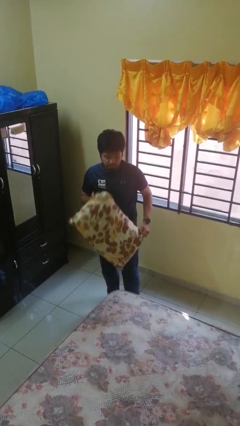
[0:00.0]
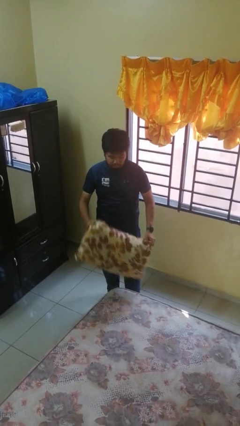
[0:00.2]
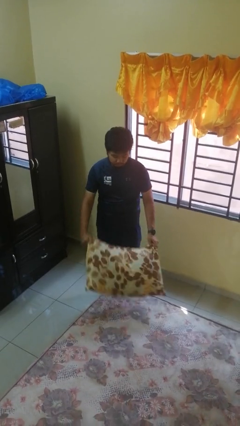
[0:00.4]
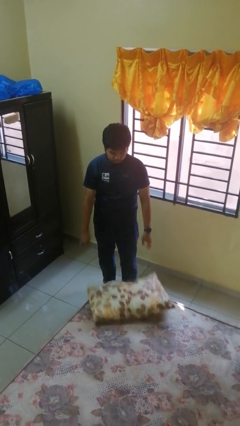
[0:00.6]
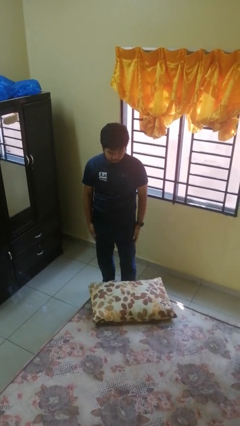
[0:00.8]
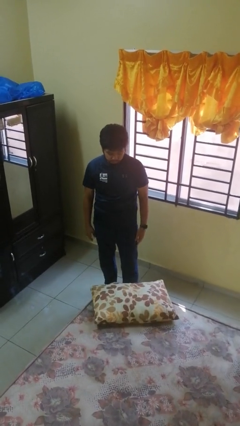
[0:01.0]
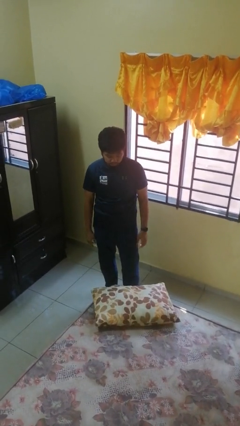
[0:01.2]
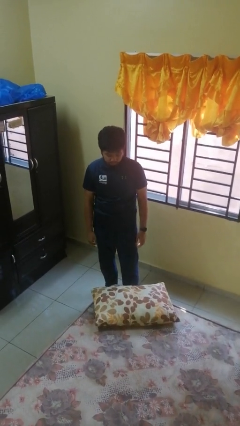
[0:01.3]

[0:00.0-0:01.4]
person puts down object on bed

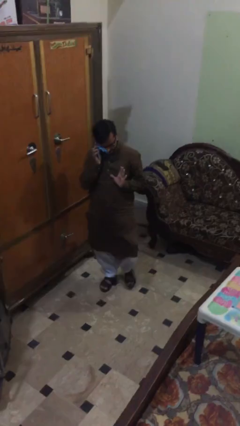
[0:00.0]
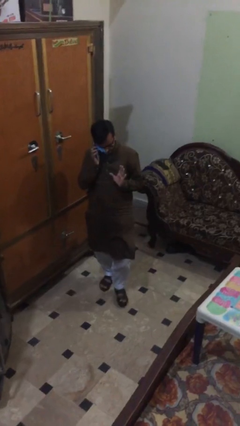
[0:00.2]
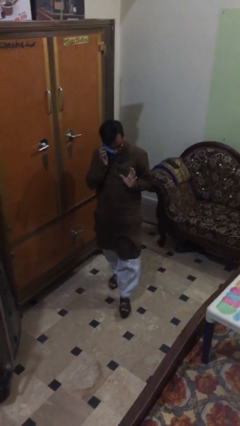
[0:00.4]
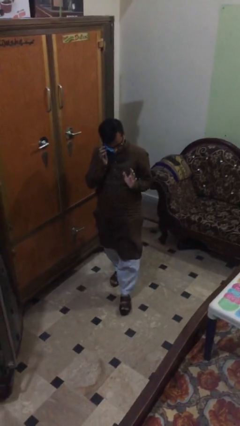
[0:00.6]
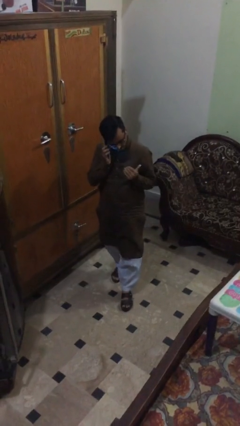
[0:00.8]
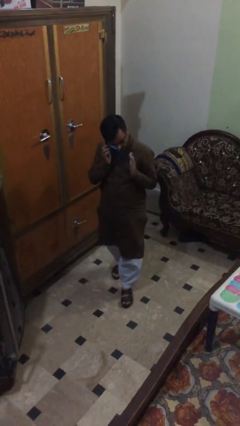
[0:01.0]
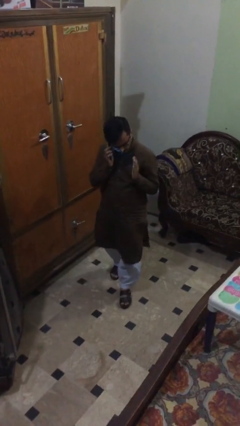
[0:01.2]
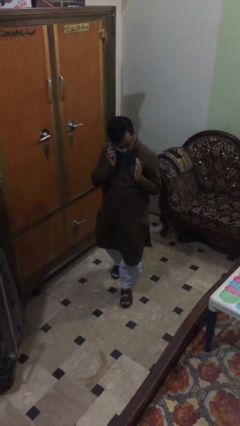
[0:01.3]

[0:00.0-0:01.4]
person talks on phone

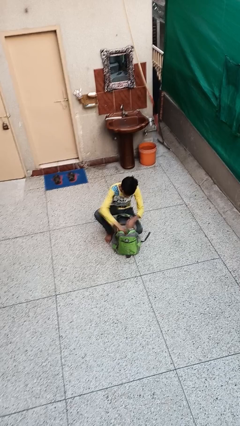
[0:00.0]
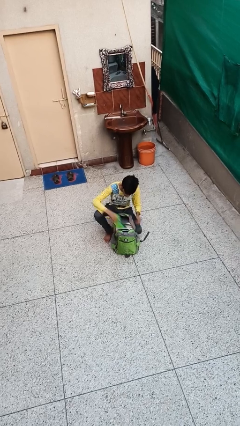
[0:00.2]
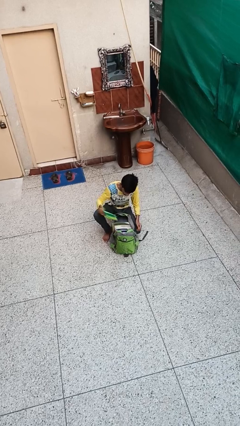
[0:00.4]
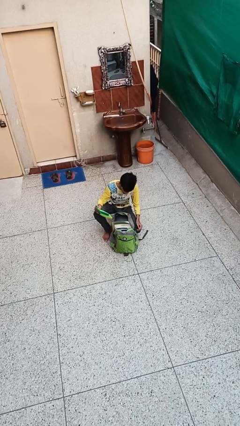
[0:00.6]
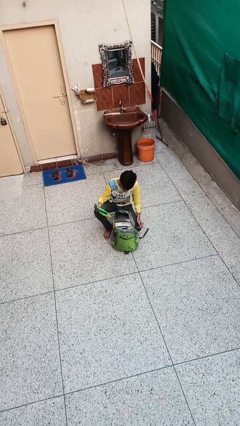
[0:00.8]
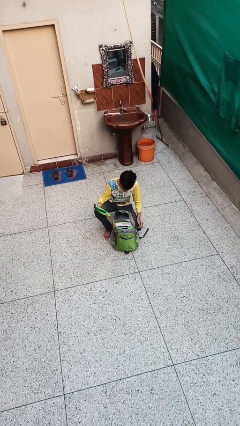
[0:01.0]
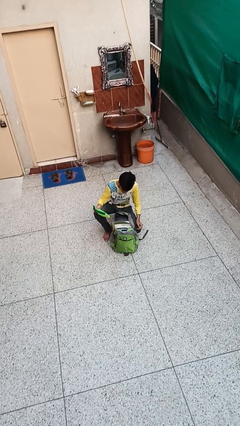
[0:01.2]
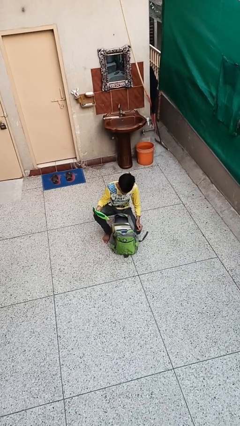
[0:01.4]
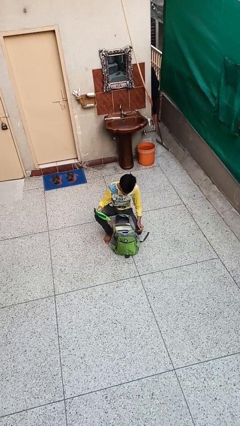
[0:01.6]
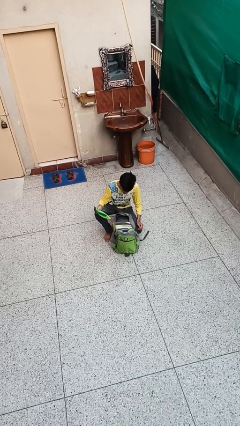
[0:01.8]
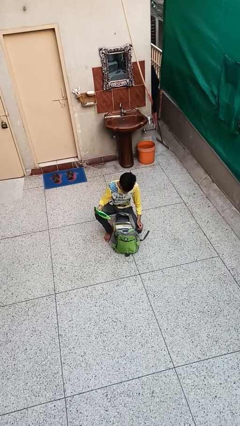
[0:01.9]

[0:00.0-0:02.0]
person takes object from backpack

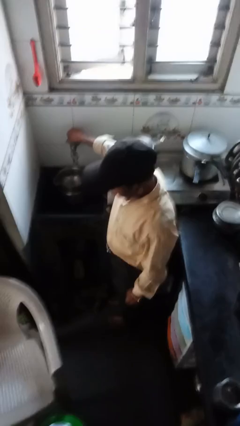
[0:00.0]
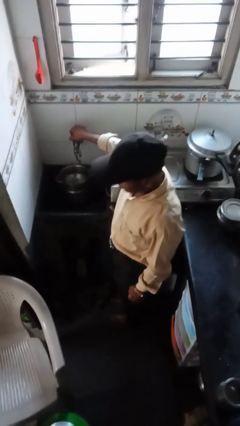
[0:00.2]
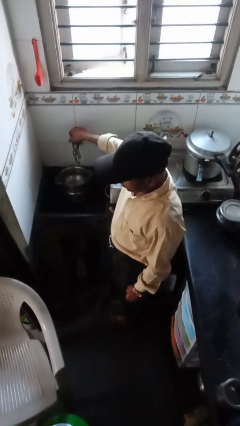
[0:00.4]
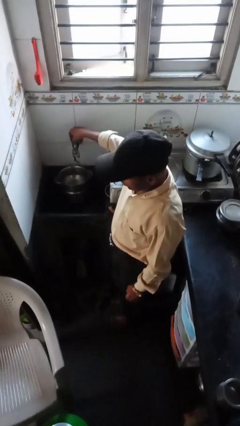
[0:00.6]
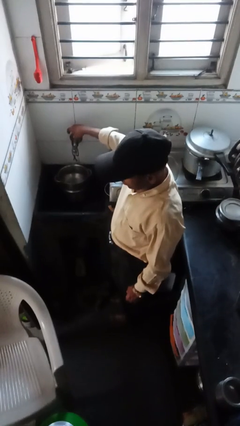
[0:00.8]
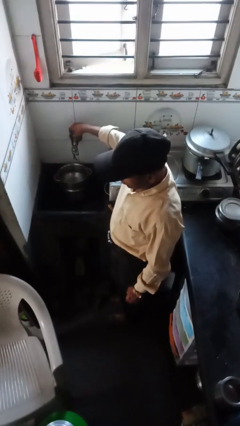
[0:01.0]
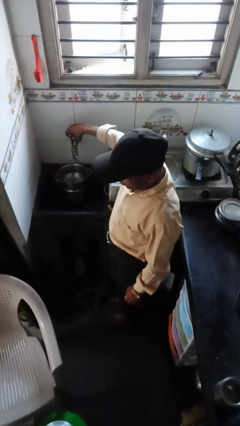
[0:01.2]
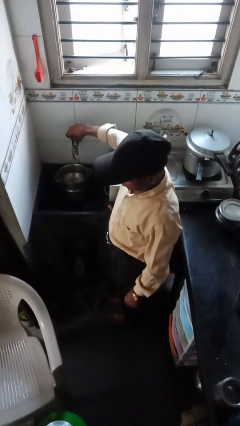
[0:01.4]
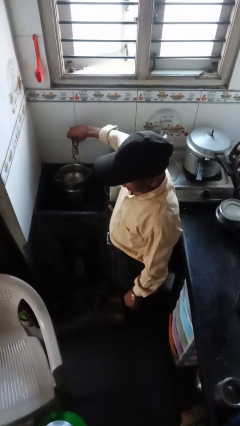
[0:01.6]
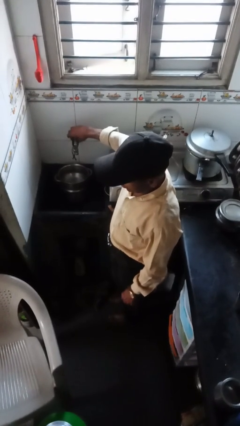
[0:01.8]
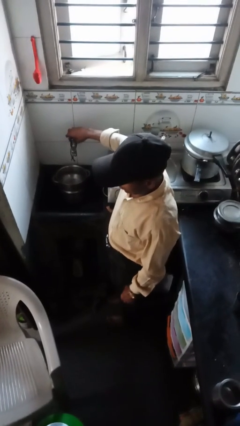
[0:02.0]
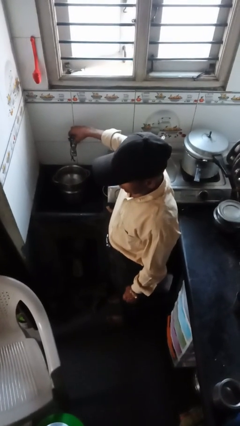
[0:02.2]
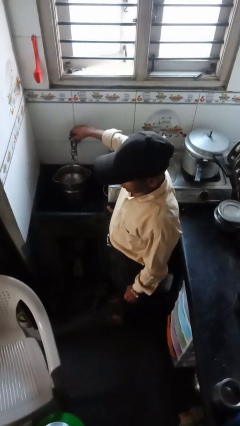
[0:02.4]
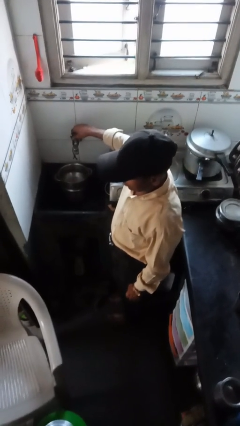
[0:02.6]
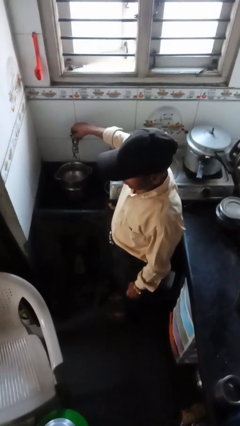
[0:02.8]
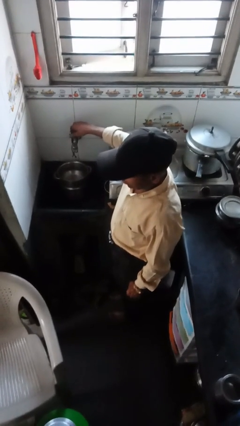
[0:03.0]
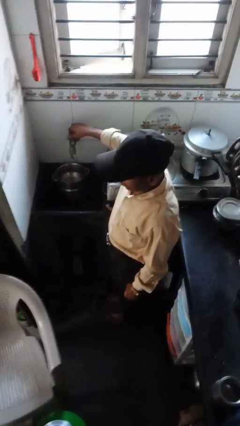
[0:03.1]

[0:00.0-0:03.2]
person turns on faucet

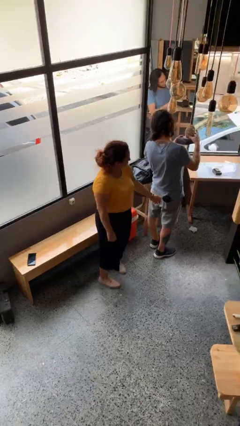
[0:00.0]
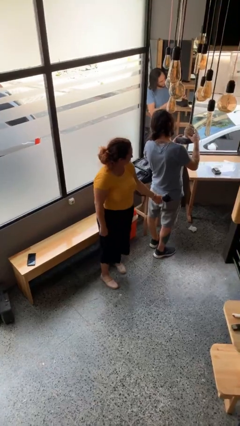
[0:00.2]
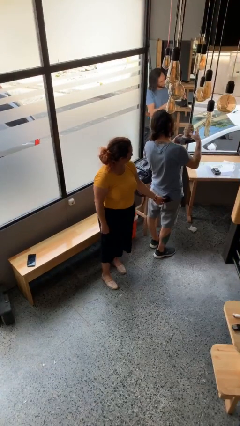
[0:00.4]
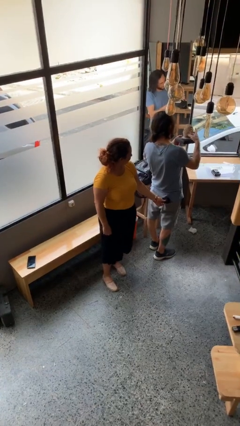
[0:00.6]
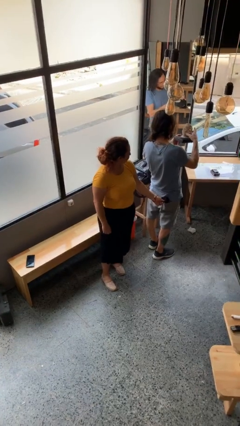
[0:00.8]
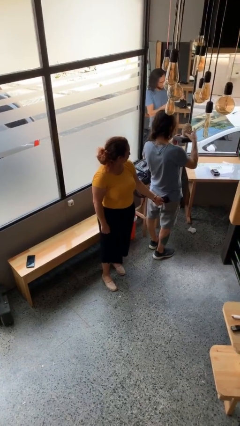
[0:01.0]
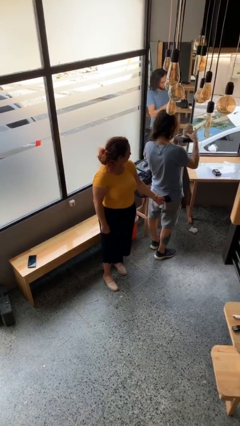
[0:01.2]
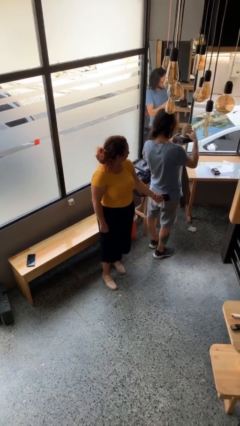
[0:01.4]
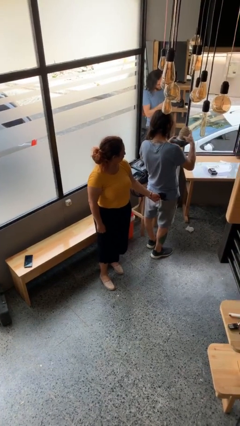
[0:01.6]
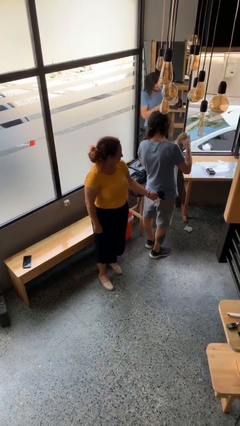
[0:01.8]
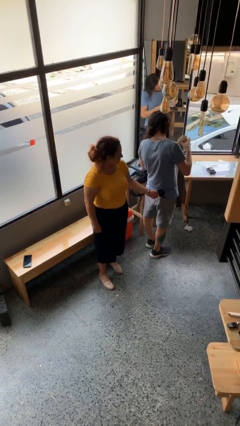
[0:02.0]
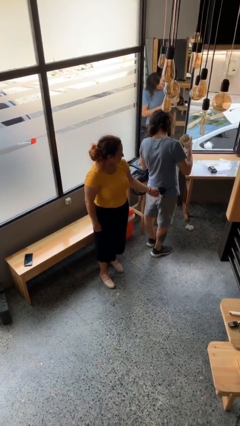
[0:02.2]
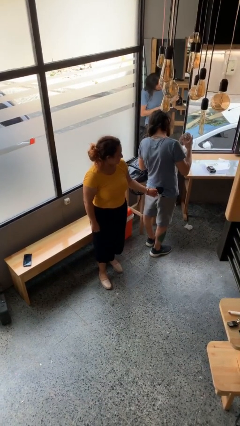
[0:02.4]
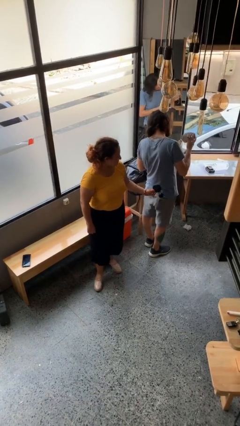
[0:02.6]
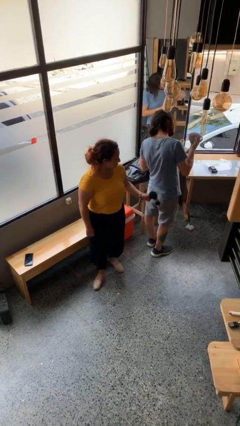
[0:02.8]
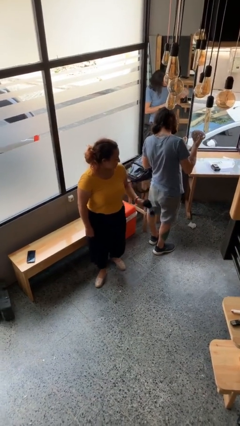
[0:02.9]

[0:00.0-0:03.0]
person steals object from person

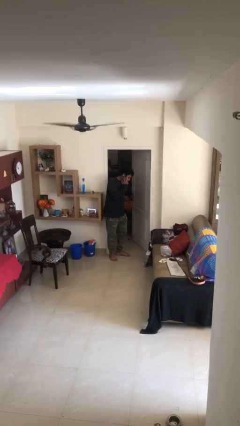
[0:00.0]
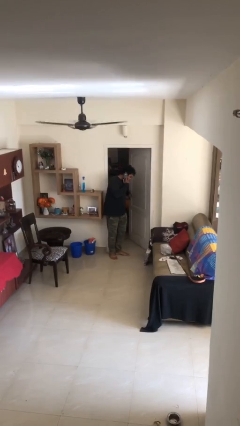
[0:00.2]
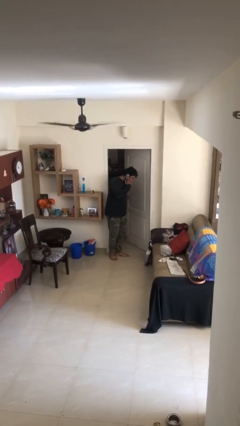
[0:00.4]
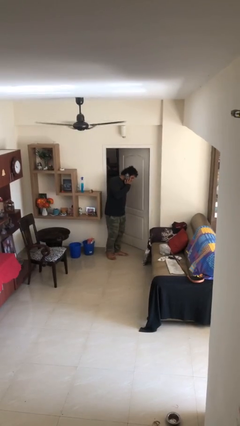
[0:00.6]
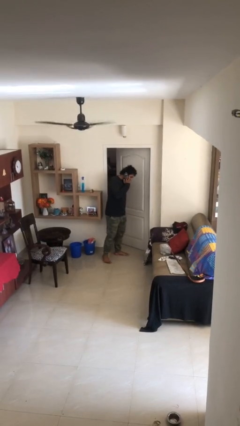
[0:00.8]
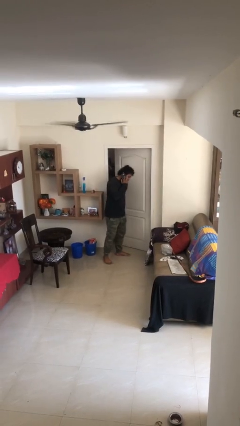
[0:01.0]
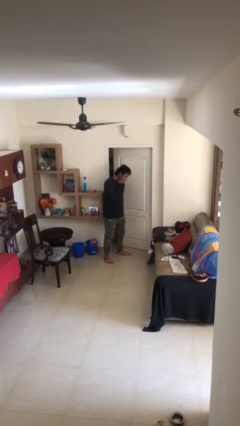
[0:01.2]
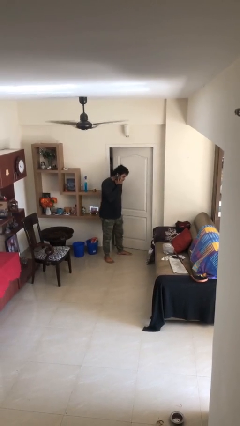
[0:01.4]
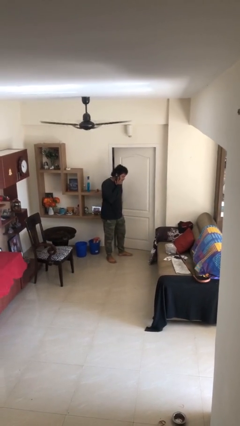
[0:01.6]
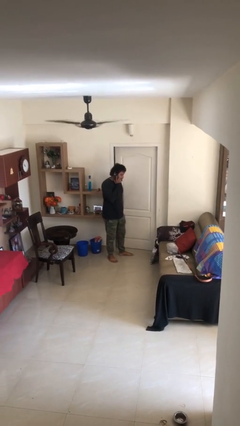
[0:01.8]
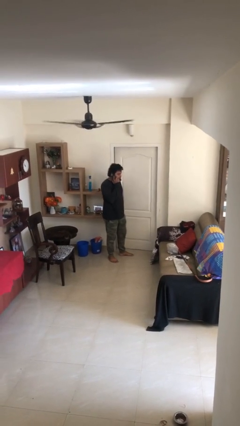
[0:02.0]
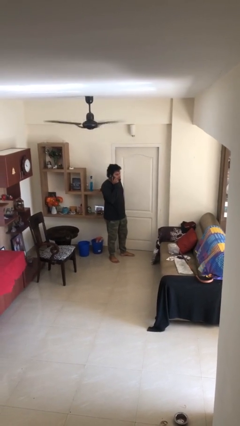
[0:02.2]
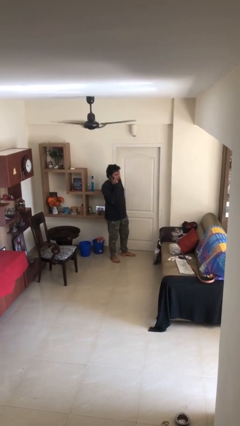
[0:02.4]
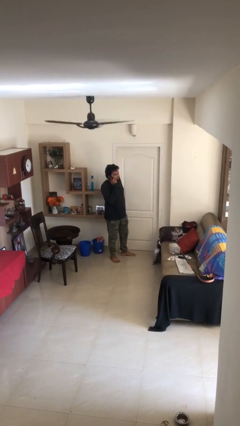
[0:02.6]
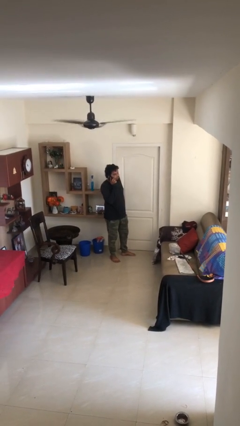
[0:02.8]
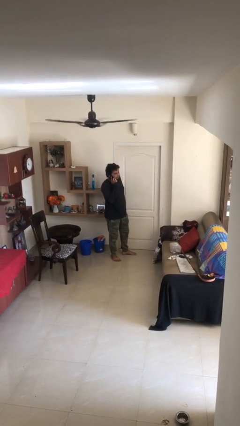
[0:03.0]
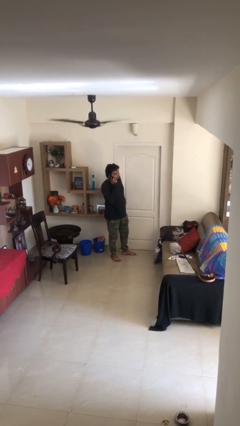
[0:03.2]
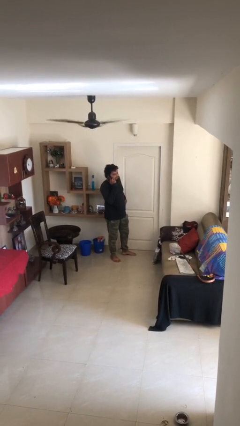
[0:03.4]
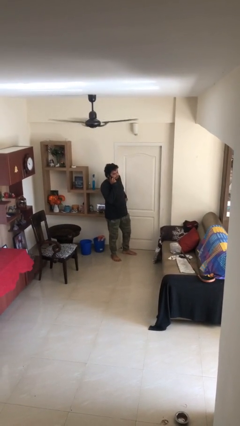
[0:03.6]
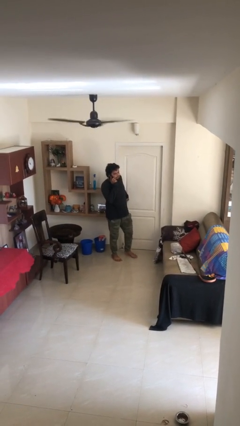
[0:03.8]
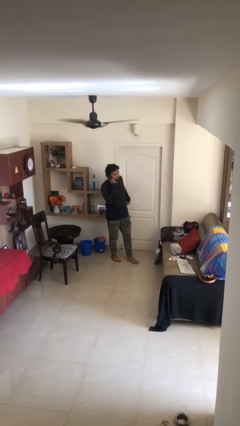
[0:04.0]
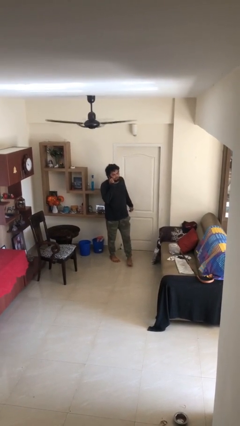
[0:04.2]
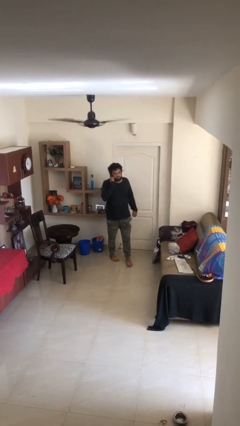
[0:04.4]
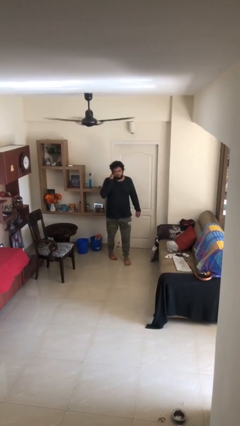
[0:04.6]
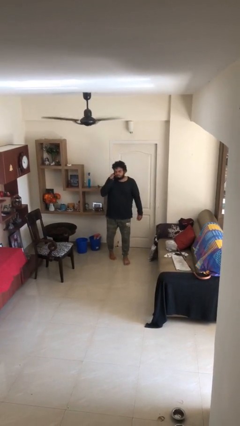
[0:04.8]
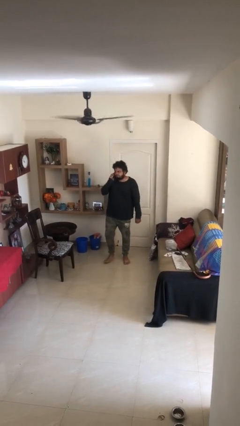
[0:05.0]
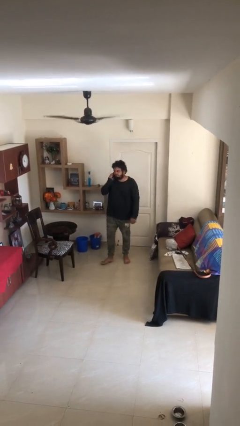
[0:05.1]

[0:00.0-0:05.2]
person closes facility door

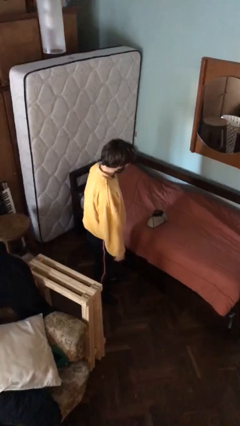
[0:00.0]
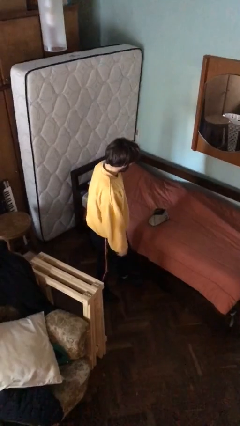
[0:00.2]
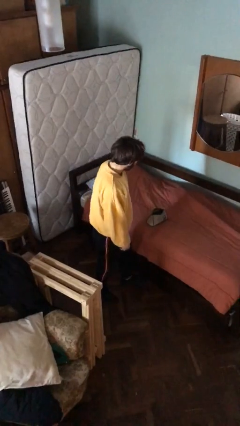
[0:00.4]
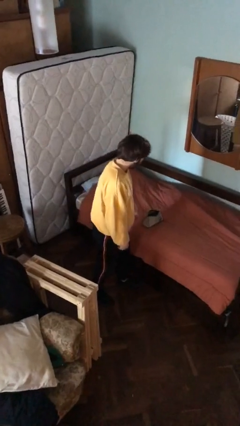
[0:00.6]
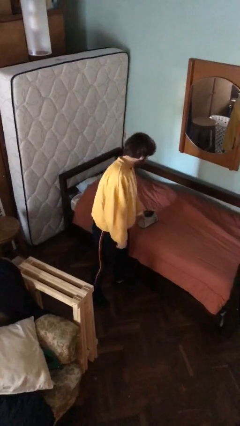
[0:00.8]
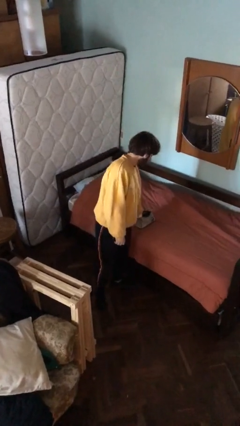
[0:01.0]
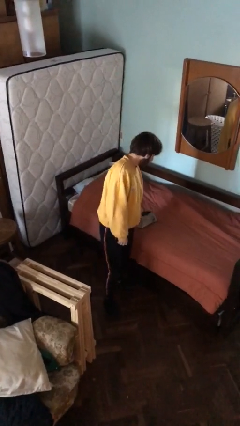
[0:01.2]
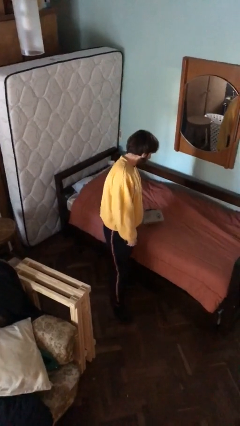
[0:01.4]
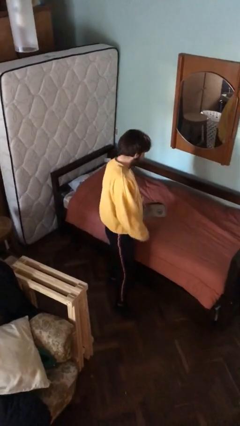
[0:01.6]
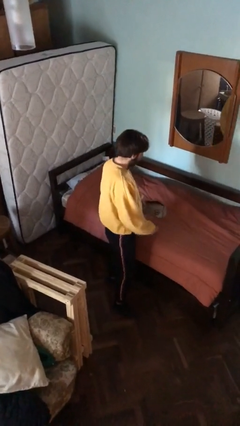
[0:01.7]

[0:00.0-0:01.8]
person picks up object from bed
